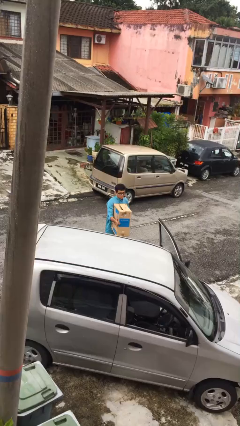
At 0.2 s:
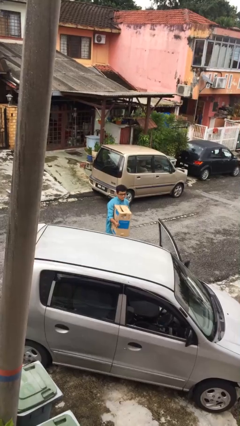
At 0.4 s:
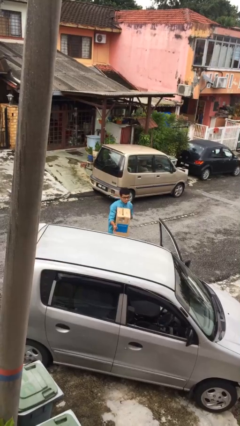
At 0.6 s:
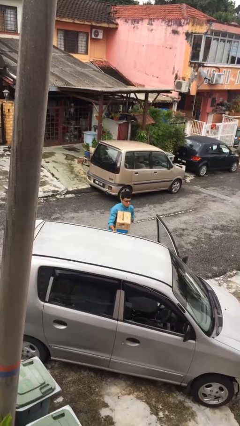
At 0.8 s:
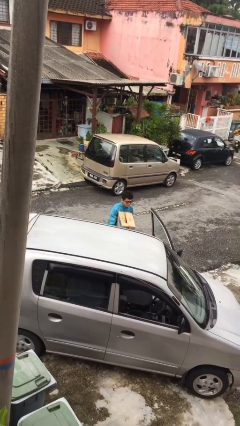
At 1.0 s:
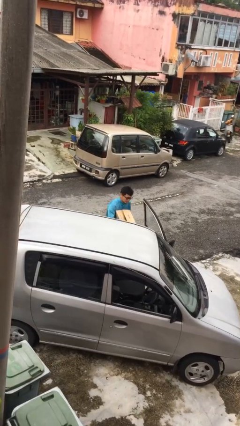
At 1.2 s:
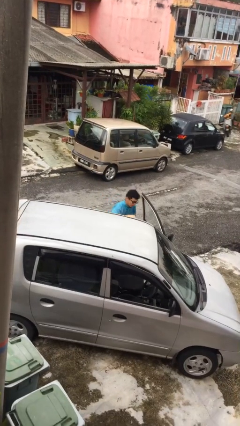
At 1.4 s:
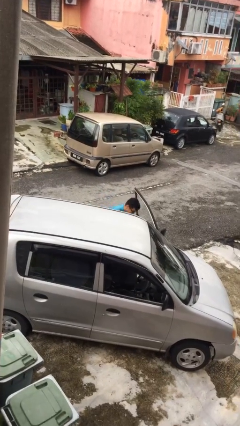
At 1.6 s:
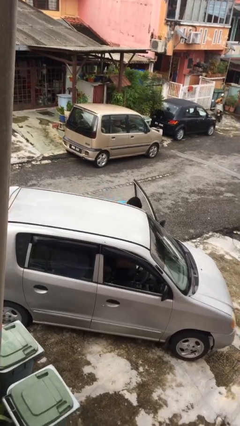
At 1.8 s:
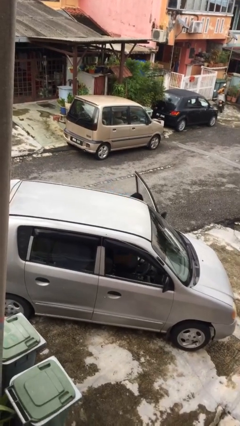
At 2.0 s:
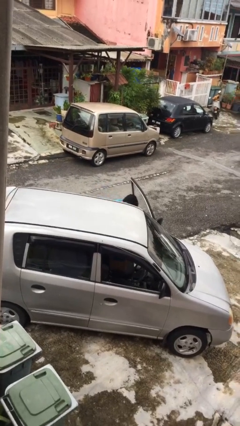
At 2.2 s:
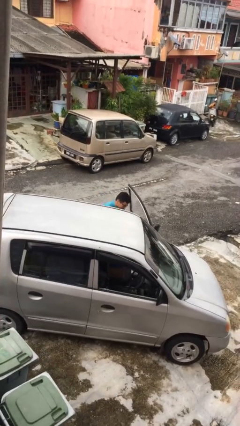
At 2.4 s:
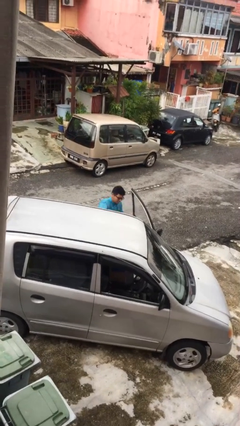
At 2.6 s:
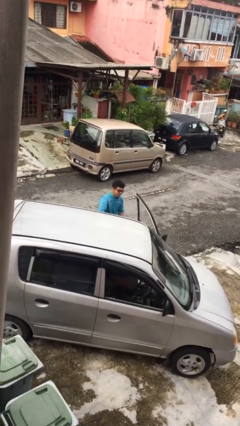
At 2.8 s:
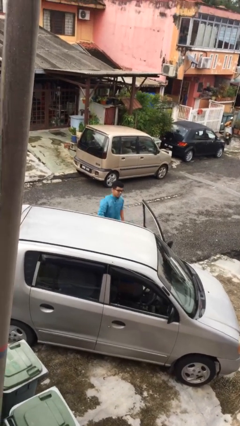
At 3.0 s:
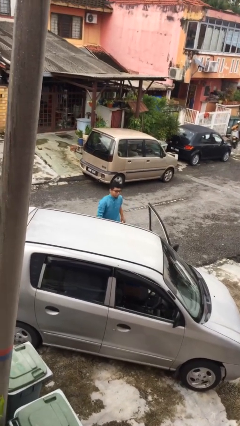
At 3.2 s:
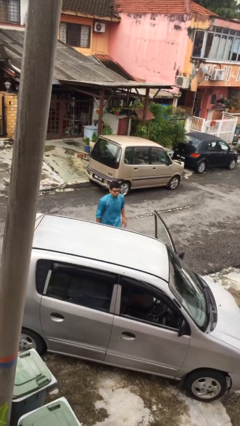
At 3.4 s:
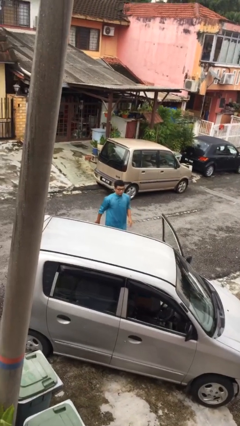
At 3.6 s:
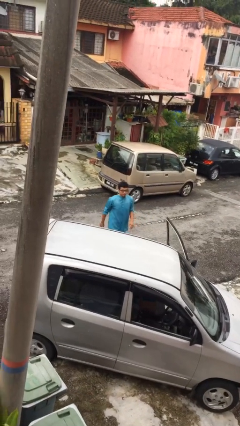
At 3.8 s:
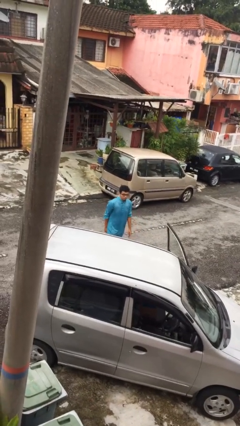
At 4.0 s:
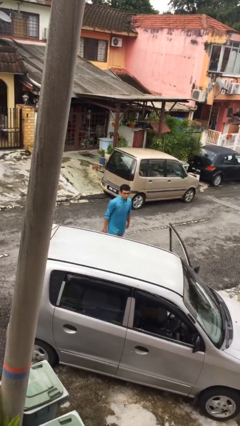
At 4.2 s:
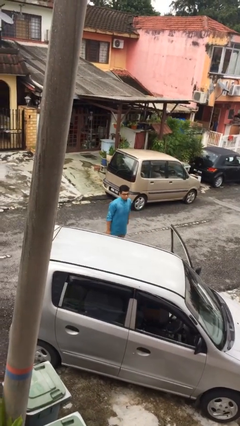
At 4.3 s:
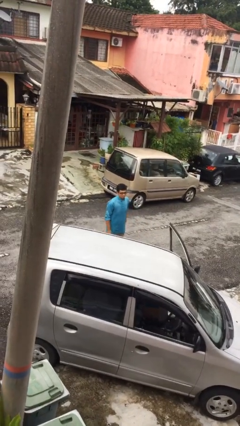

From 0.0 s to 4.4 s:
person loads car

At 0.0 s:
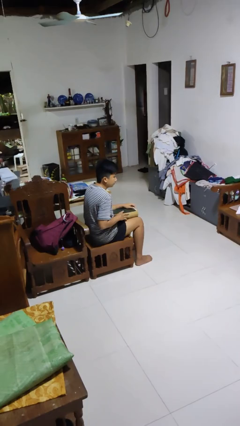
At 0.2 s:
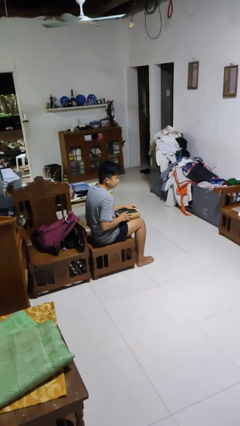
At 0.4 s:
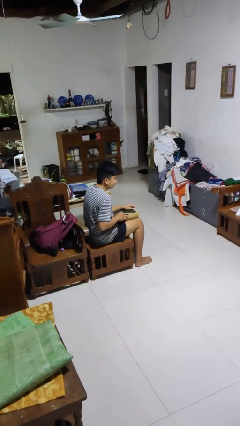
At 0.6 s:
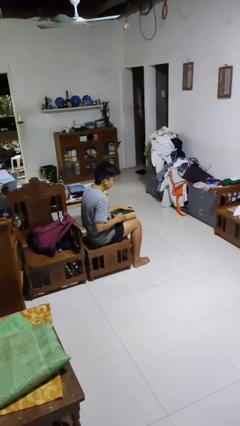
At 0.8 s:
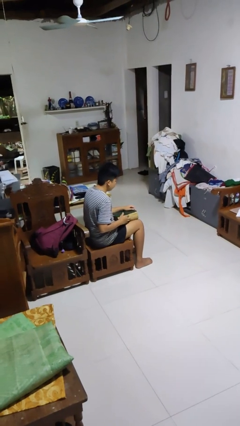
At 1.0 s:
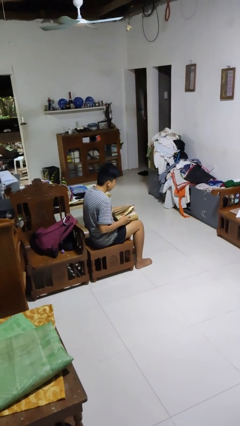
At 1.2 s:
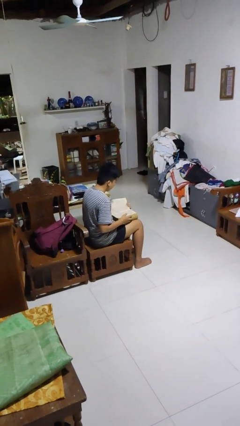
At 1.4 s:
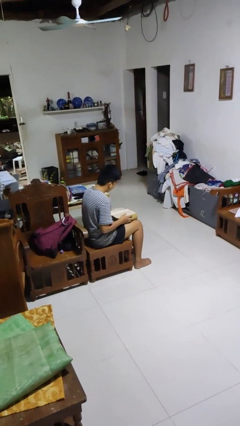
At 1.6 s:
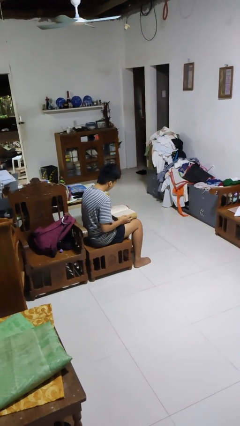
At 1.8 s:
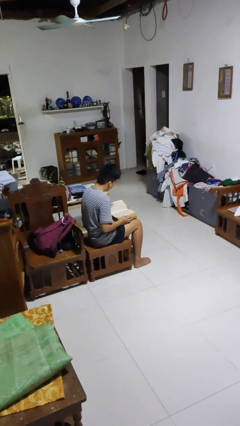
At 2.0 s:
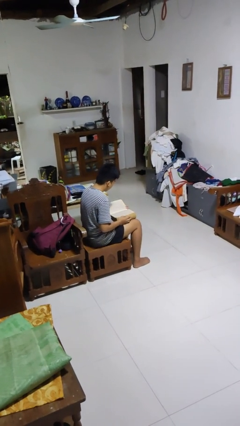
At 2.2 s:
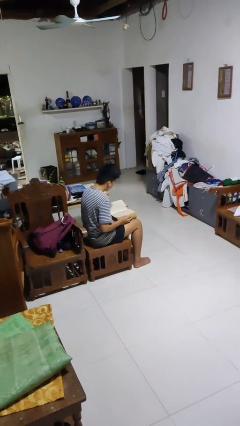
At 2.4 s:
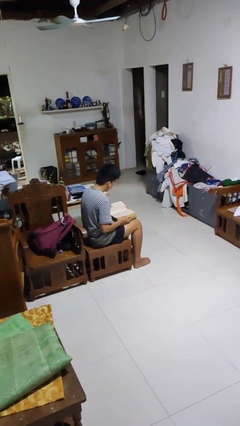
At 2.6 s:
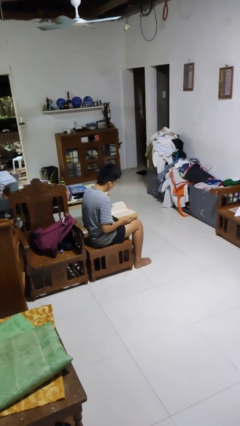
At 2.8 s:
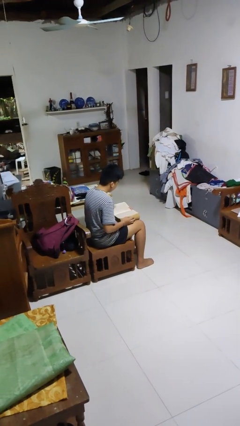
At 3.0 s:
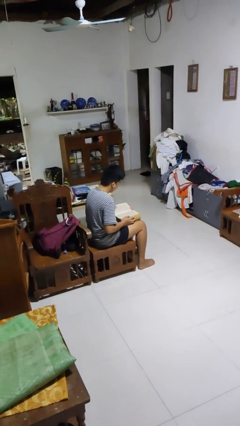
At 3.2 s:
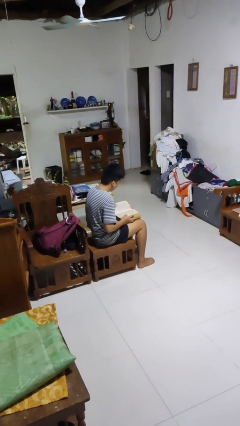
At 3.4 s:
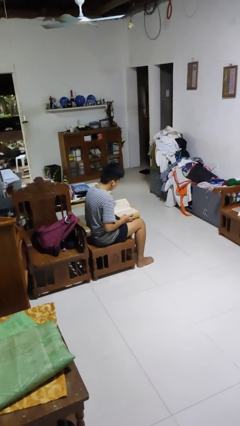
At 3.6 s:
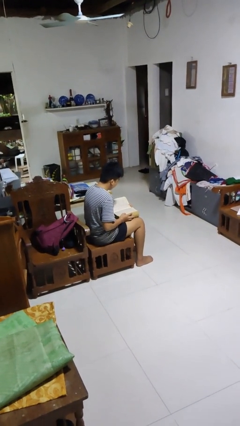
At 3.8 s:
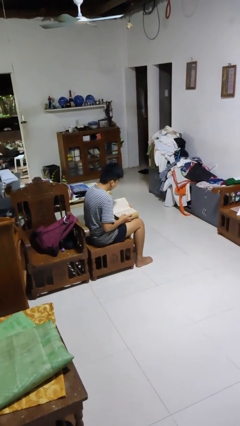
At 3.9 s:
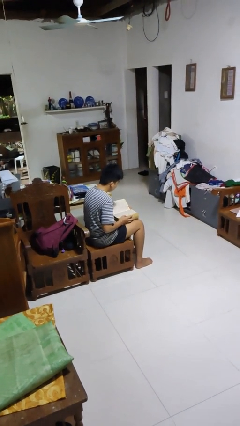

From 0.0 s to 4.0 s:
person reads book

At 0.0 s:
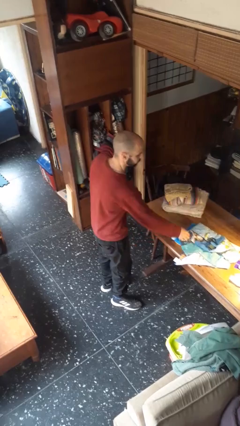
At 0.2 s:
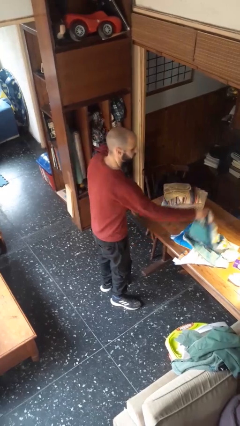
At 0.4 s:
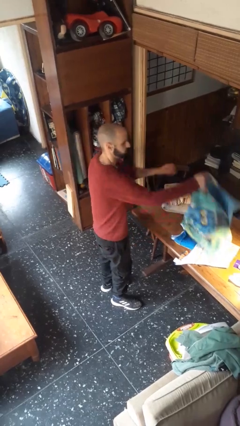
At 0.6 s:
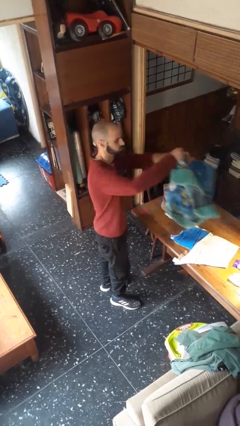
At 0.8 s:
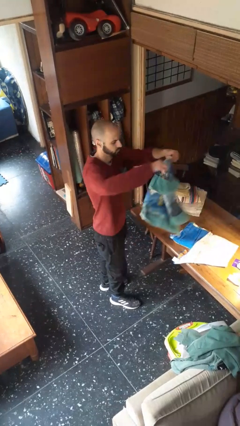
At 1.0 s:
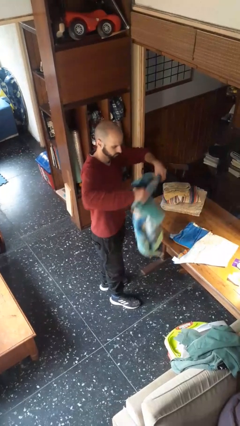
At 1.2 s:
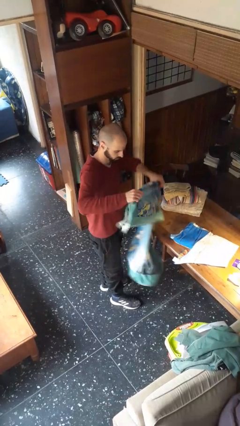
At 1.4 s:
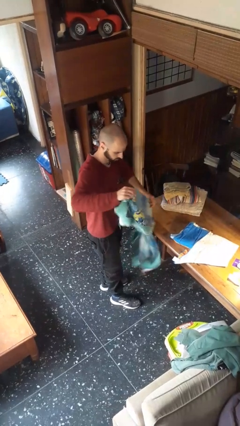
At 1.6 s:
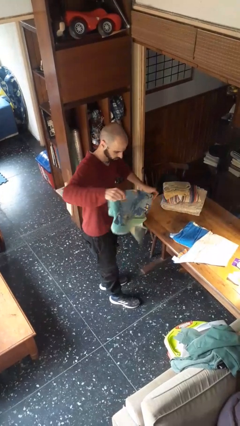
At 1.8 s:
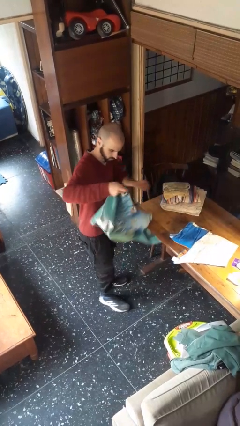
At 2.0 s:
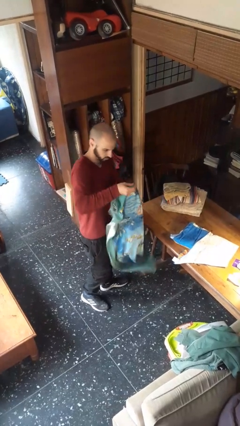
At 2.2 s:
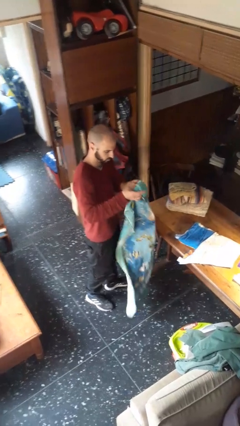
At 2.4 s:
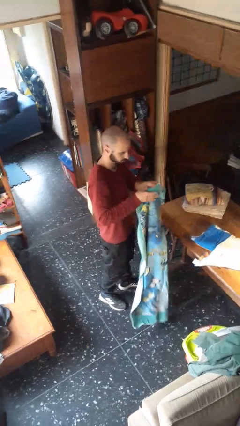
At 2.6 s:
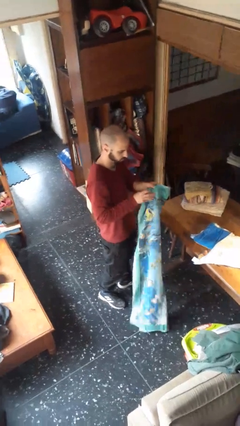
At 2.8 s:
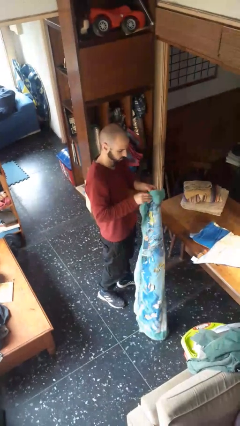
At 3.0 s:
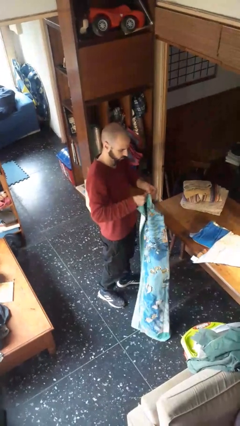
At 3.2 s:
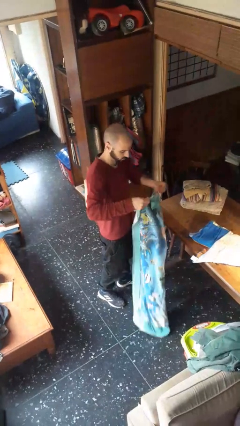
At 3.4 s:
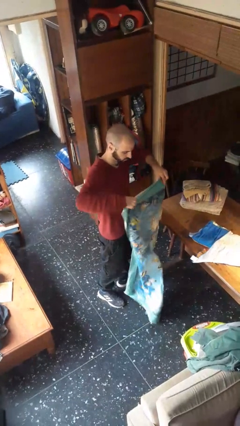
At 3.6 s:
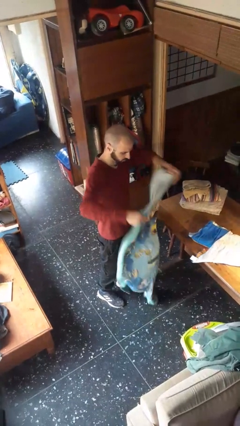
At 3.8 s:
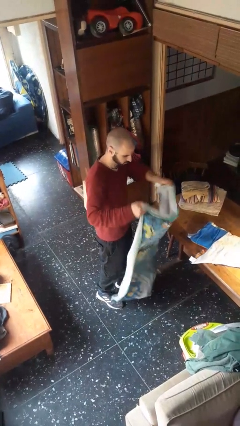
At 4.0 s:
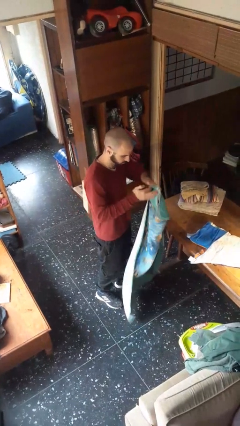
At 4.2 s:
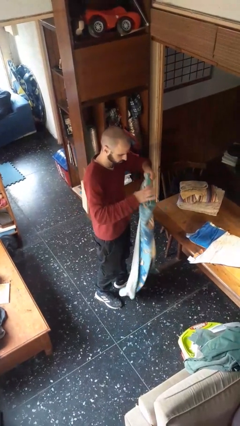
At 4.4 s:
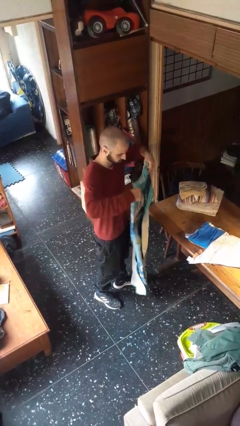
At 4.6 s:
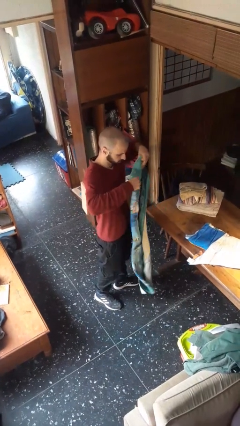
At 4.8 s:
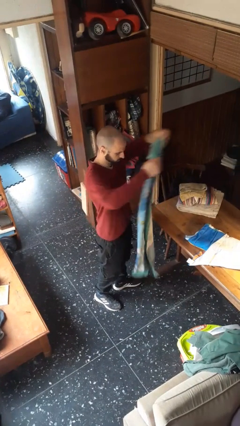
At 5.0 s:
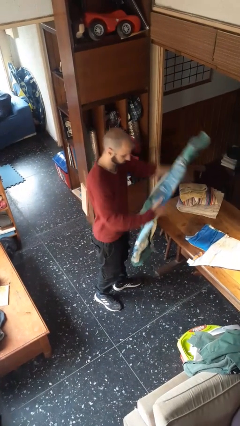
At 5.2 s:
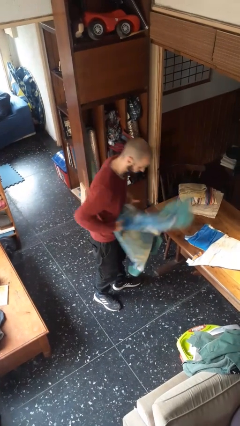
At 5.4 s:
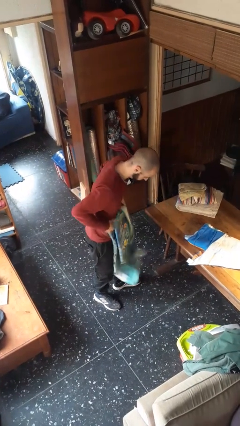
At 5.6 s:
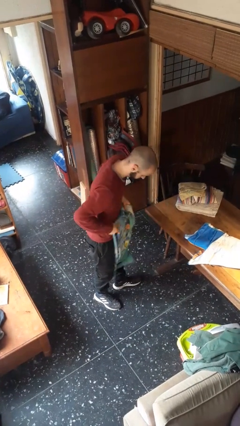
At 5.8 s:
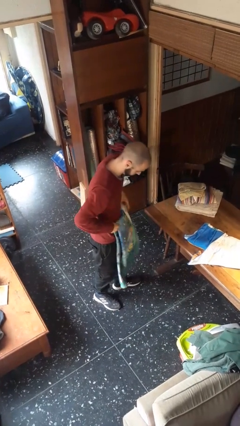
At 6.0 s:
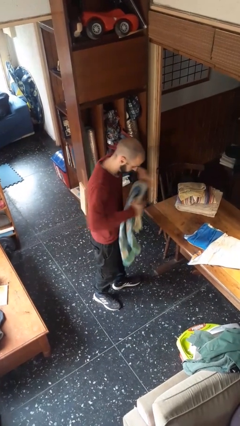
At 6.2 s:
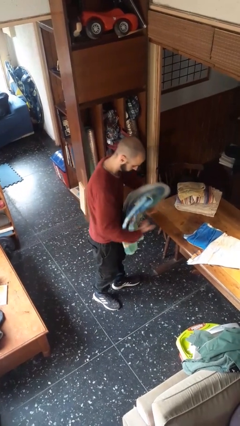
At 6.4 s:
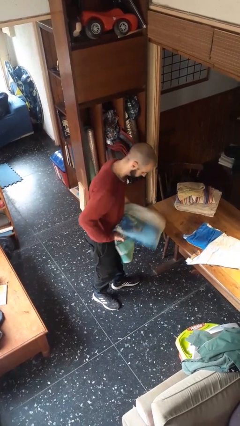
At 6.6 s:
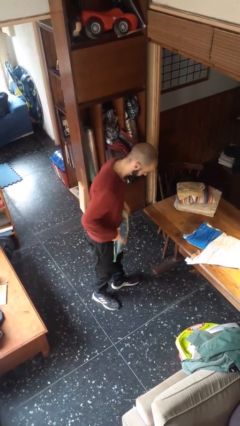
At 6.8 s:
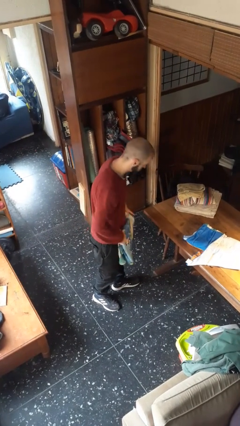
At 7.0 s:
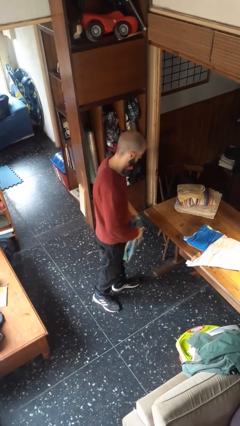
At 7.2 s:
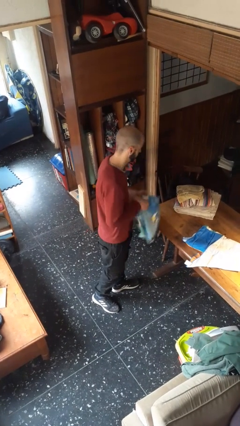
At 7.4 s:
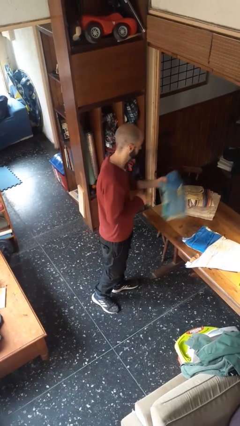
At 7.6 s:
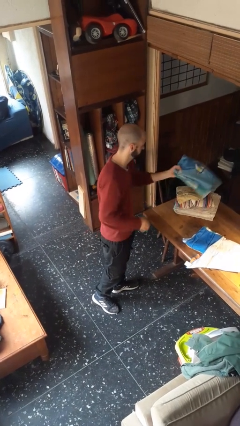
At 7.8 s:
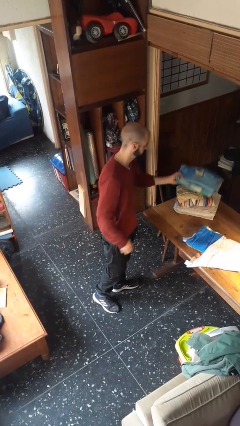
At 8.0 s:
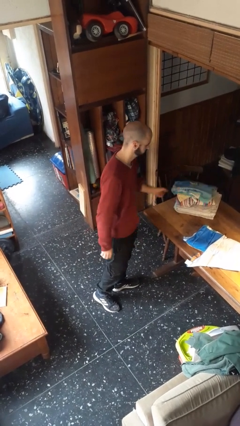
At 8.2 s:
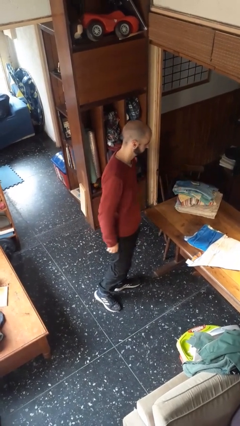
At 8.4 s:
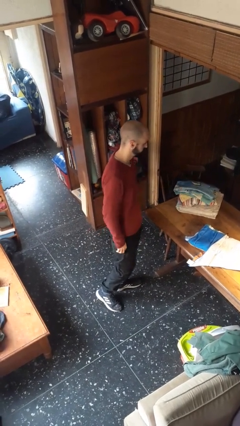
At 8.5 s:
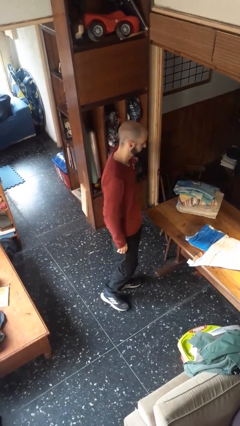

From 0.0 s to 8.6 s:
person folds towel

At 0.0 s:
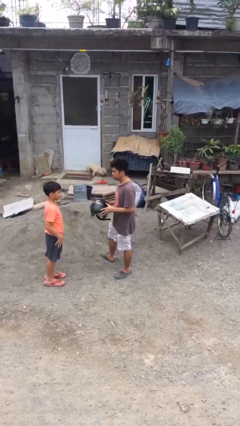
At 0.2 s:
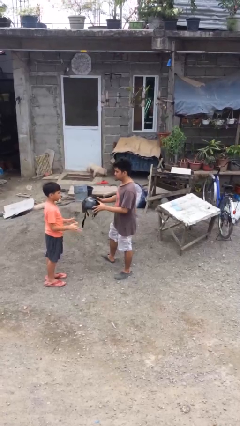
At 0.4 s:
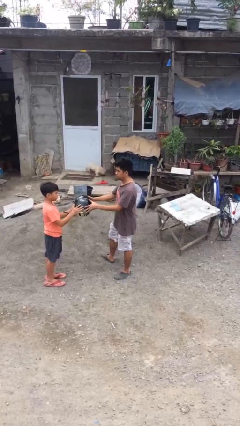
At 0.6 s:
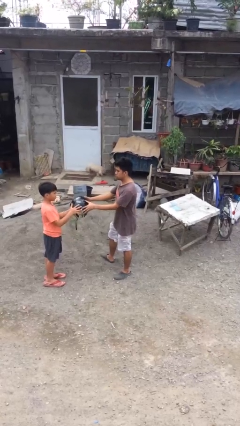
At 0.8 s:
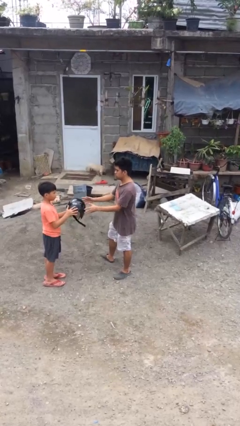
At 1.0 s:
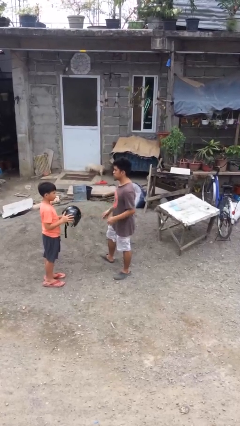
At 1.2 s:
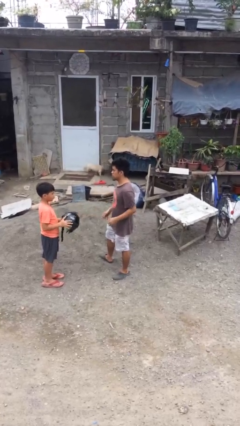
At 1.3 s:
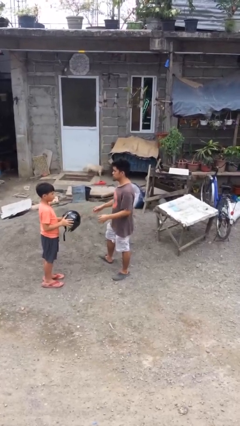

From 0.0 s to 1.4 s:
person transfers object to person
